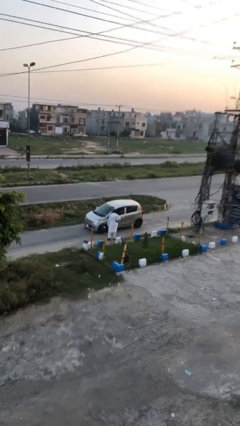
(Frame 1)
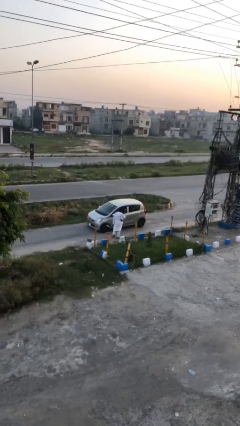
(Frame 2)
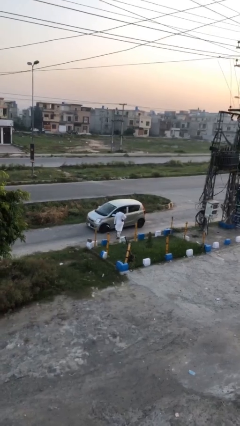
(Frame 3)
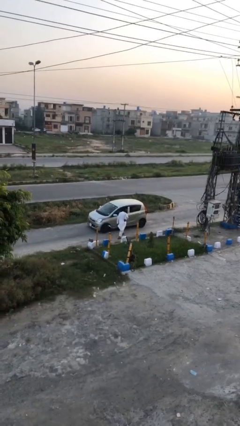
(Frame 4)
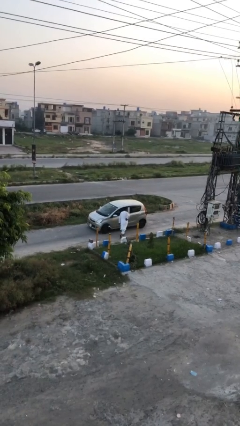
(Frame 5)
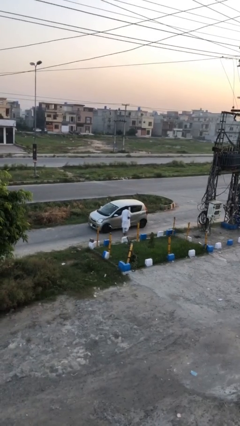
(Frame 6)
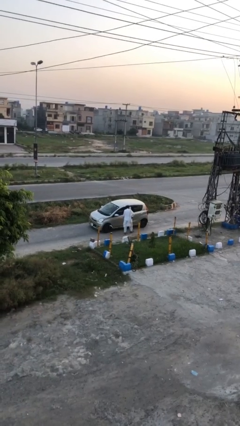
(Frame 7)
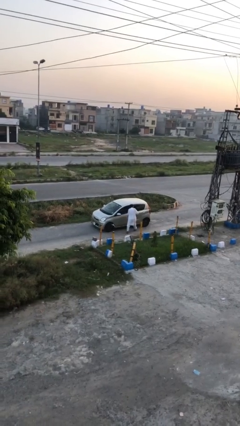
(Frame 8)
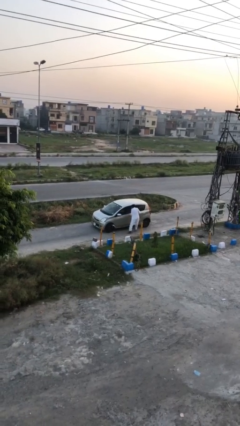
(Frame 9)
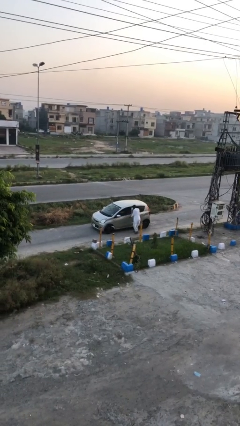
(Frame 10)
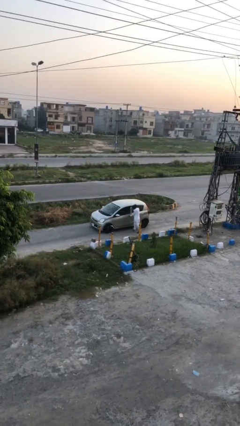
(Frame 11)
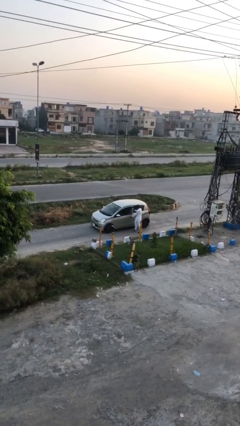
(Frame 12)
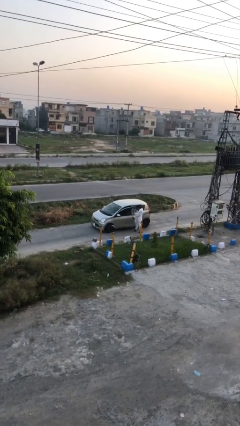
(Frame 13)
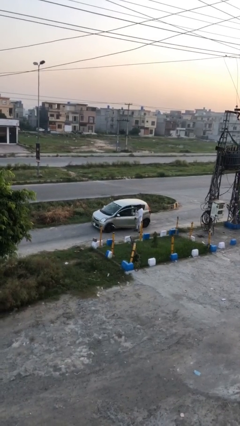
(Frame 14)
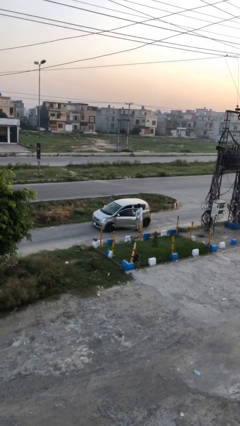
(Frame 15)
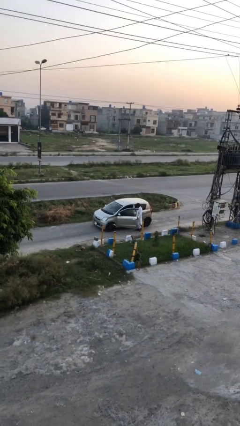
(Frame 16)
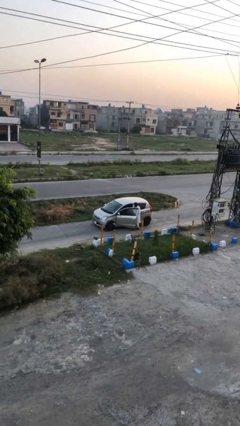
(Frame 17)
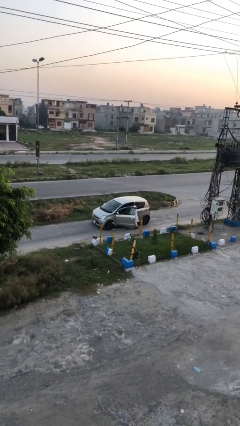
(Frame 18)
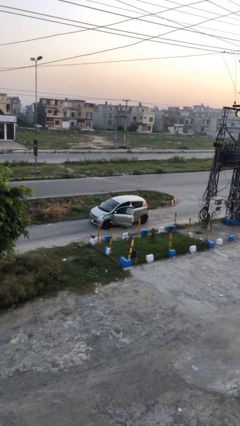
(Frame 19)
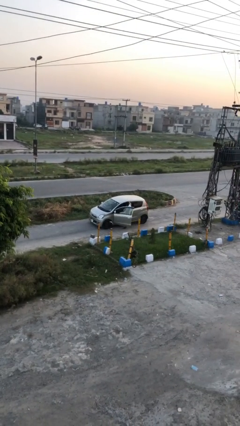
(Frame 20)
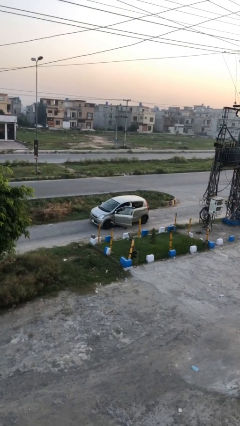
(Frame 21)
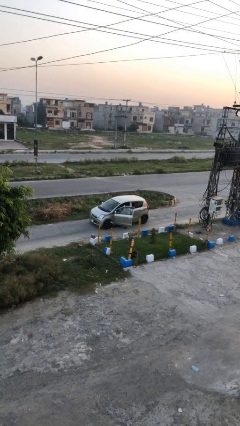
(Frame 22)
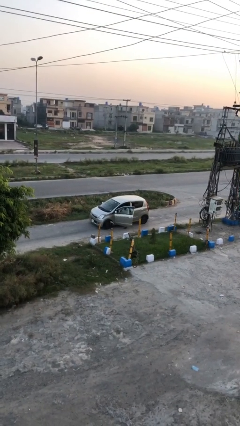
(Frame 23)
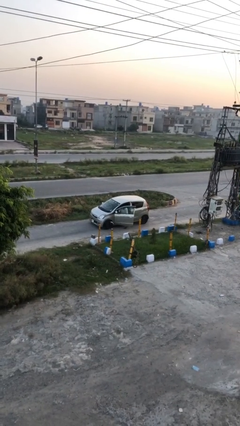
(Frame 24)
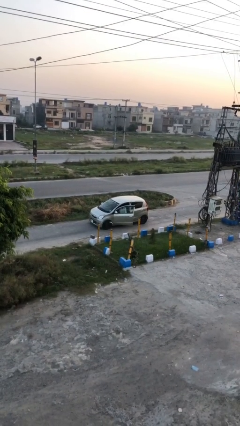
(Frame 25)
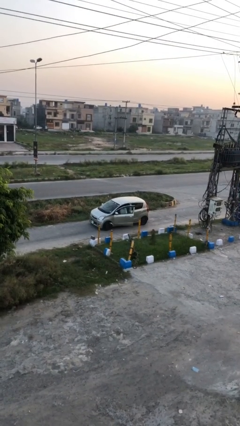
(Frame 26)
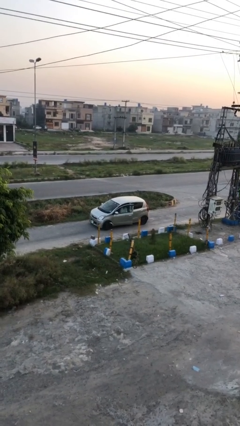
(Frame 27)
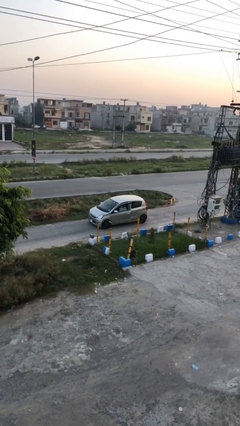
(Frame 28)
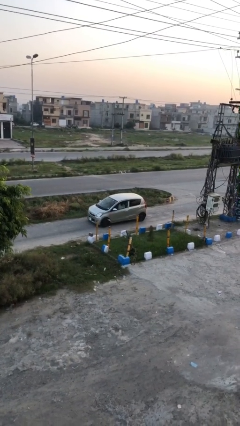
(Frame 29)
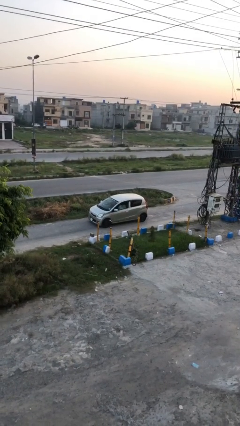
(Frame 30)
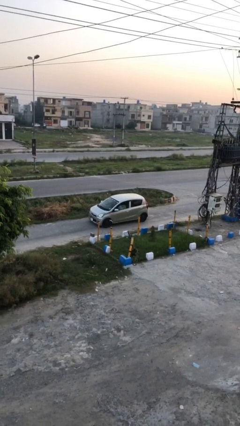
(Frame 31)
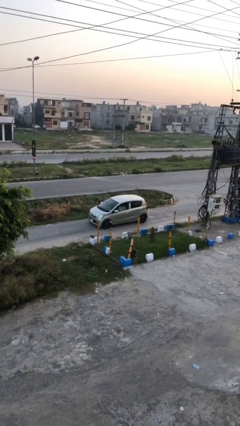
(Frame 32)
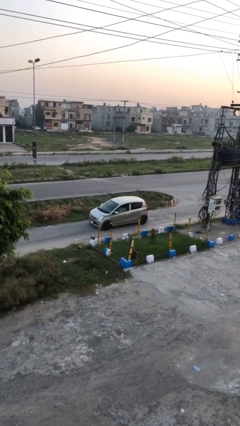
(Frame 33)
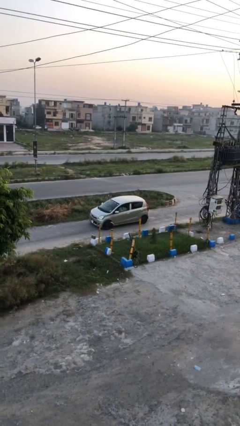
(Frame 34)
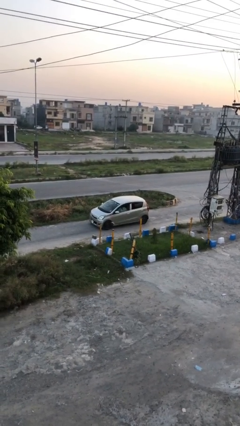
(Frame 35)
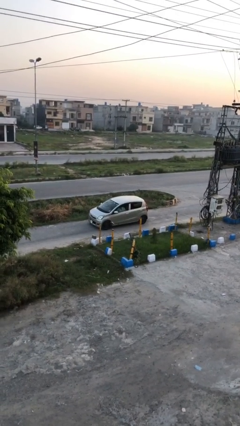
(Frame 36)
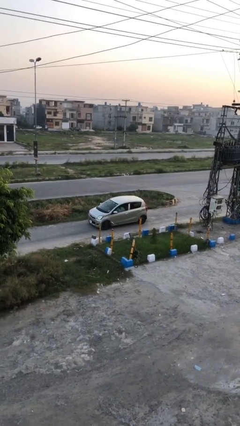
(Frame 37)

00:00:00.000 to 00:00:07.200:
car picks up person

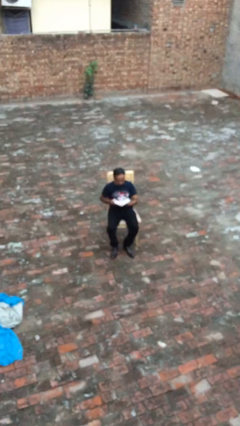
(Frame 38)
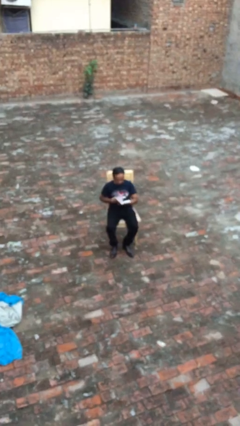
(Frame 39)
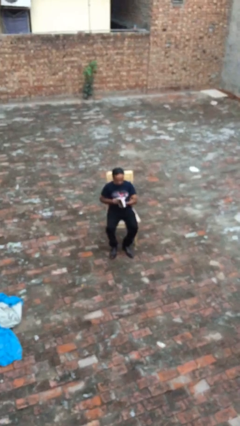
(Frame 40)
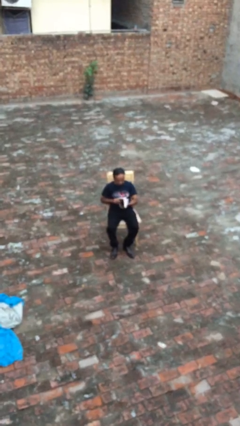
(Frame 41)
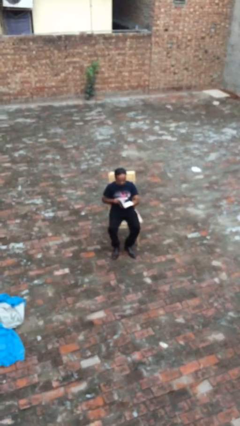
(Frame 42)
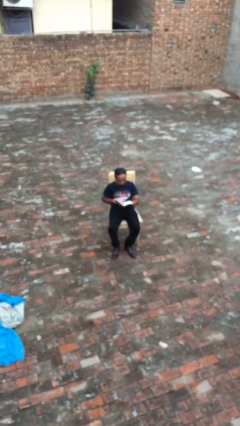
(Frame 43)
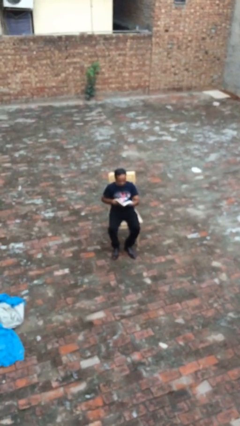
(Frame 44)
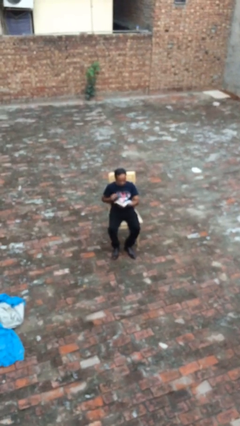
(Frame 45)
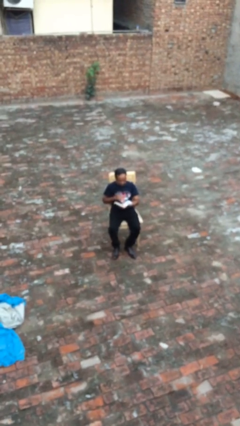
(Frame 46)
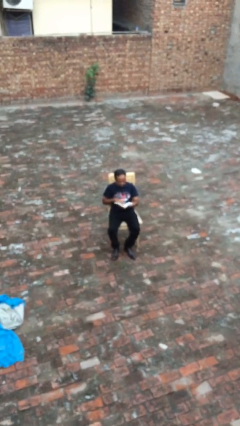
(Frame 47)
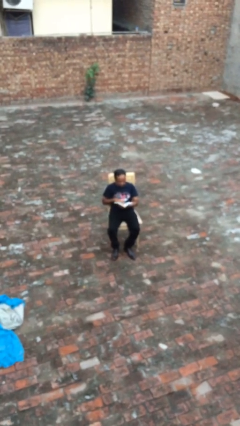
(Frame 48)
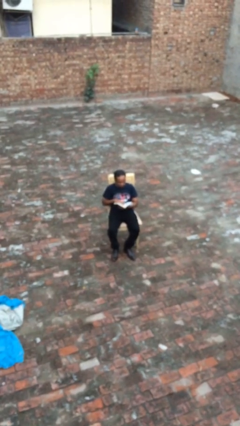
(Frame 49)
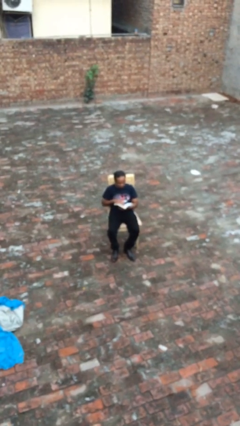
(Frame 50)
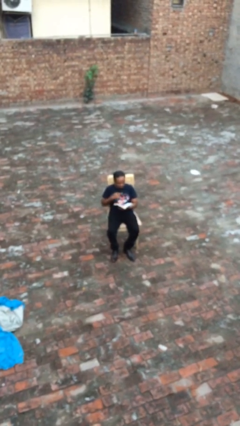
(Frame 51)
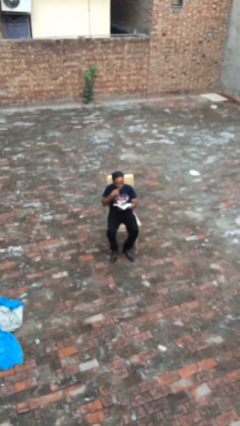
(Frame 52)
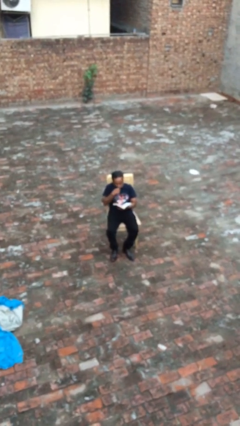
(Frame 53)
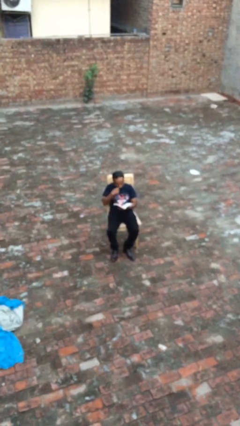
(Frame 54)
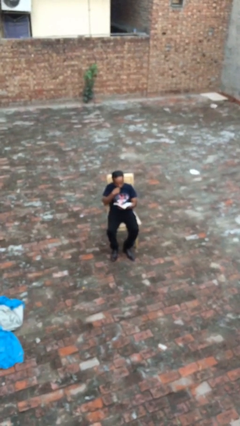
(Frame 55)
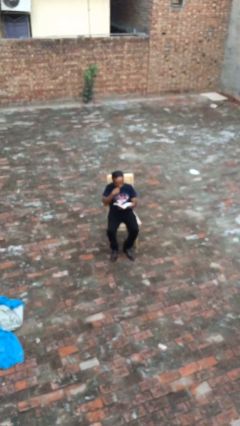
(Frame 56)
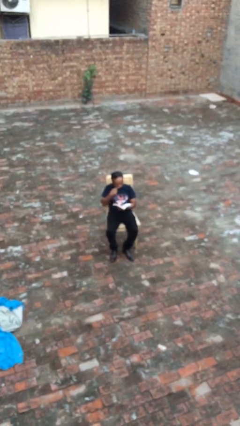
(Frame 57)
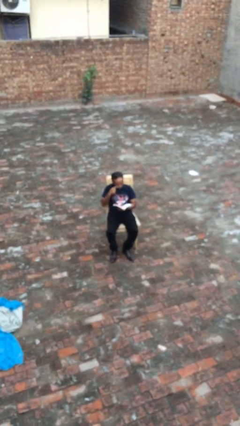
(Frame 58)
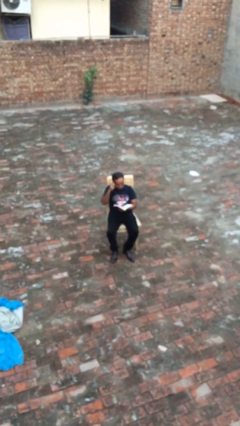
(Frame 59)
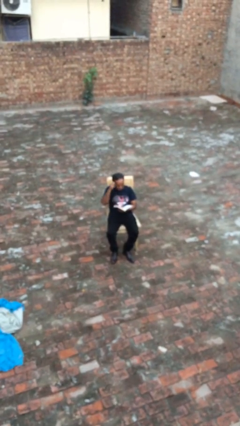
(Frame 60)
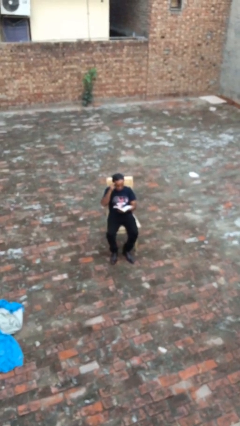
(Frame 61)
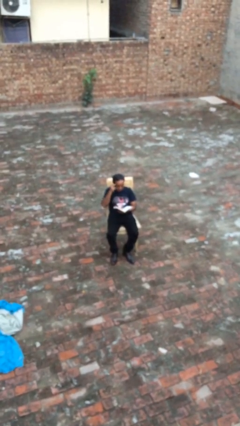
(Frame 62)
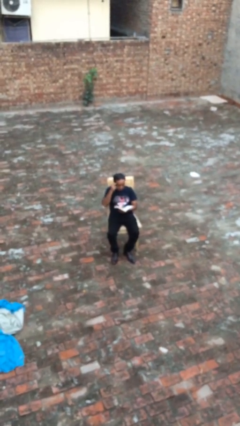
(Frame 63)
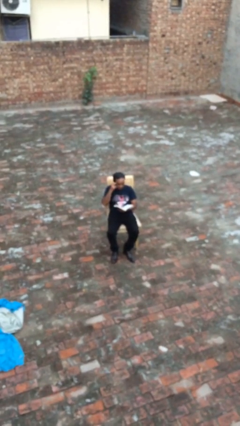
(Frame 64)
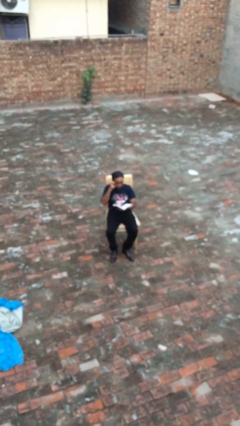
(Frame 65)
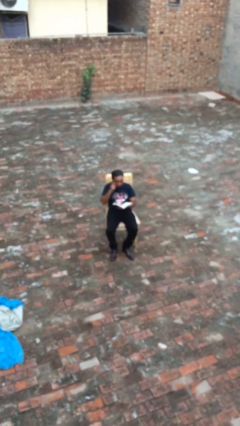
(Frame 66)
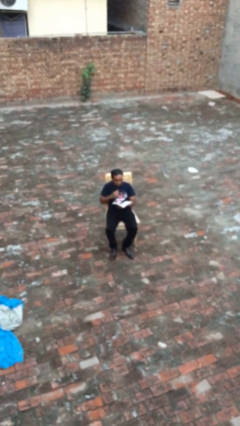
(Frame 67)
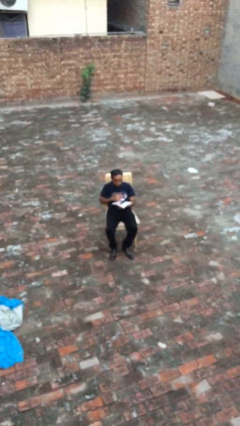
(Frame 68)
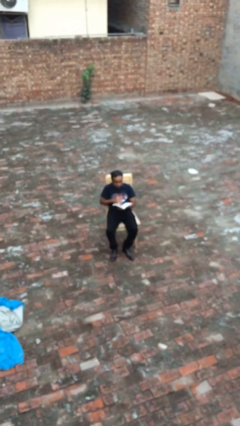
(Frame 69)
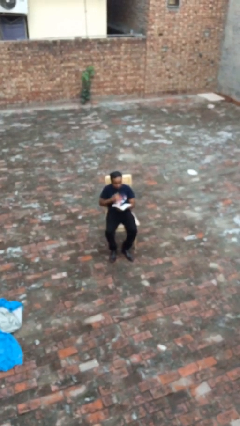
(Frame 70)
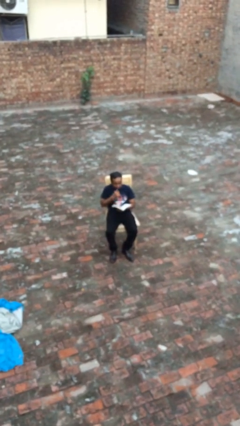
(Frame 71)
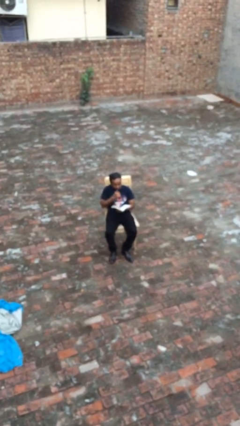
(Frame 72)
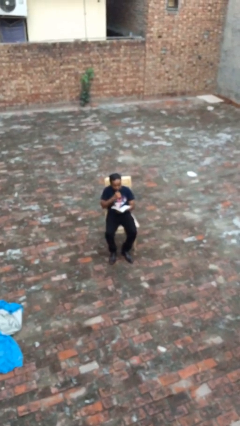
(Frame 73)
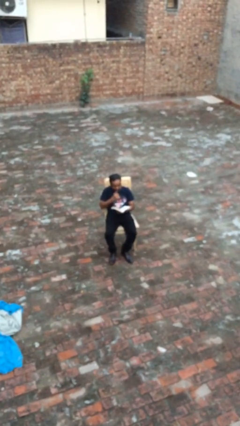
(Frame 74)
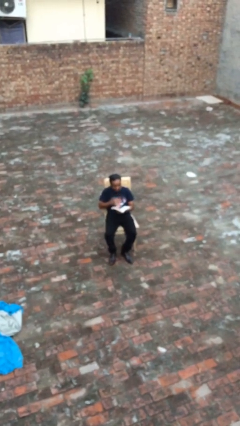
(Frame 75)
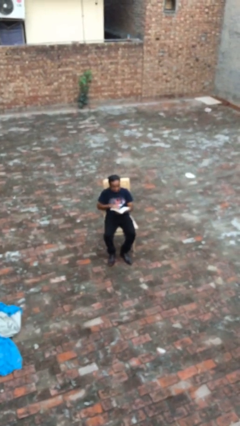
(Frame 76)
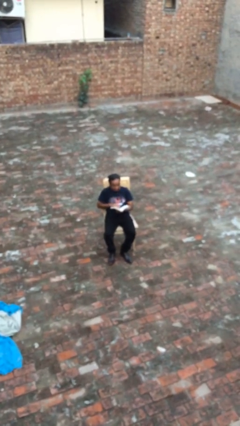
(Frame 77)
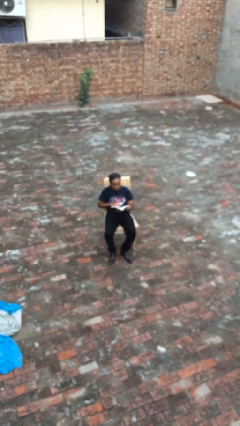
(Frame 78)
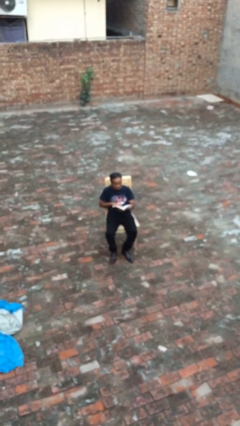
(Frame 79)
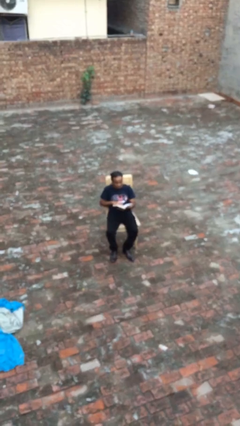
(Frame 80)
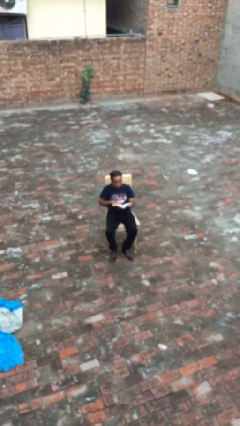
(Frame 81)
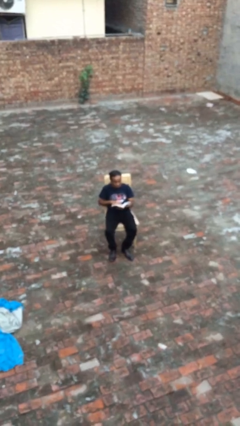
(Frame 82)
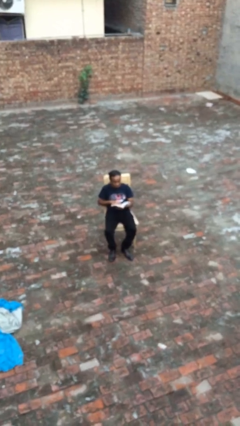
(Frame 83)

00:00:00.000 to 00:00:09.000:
person reads document

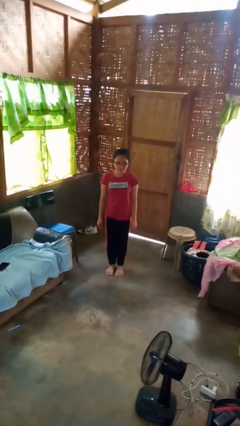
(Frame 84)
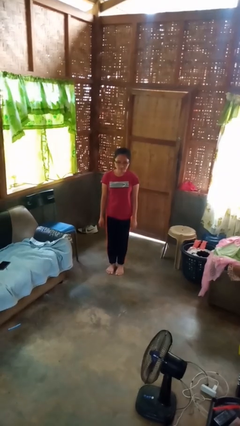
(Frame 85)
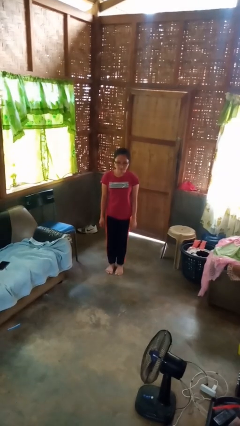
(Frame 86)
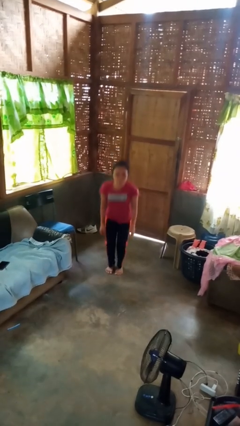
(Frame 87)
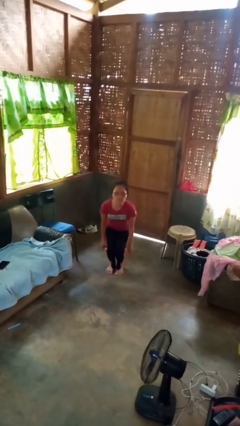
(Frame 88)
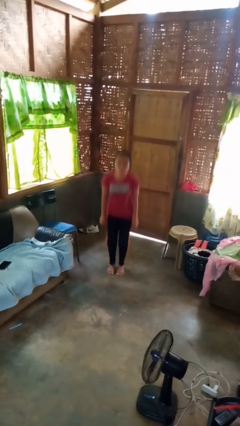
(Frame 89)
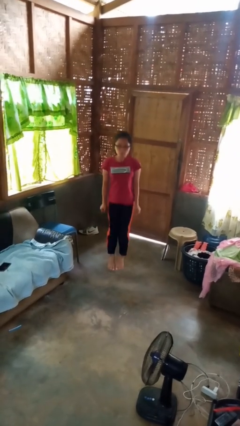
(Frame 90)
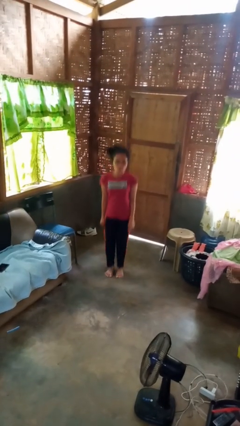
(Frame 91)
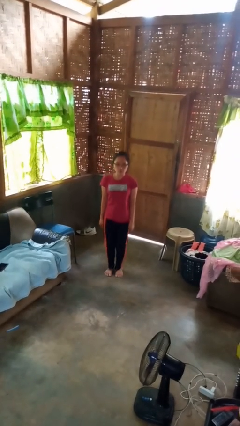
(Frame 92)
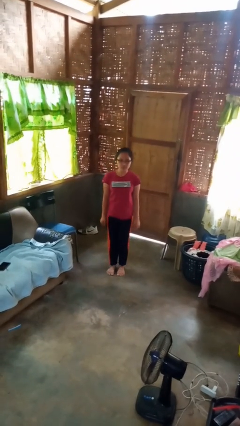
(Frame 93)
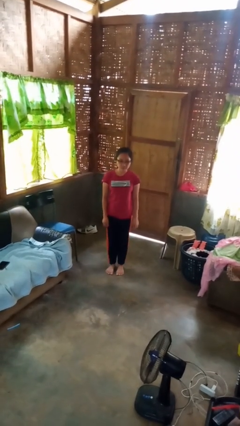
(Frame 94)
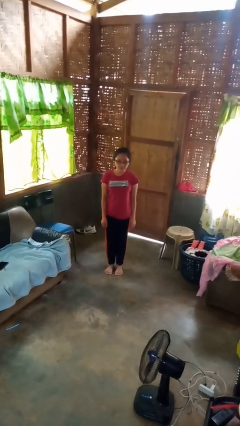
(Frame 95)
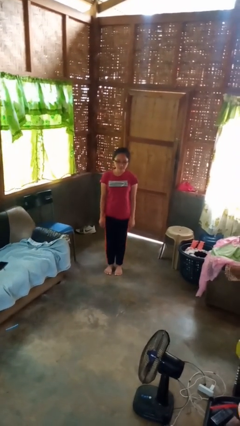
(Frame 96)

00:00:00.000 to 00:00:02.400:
person jumps
